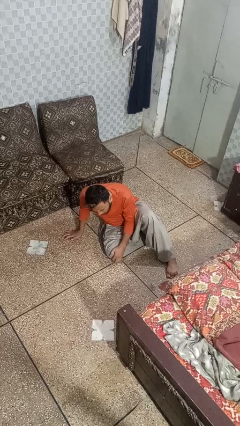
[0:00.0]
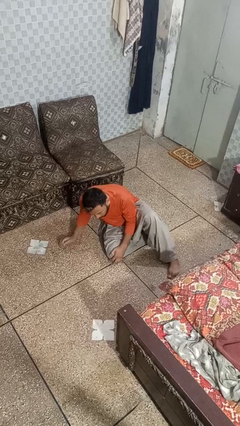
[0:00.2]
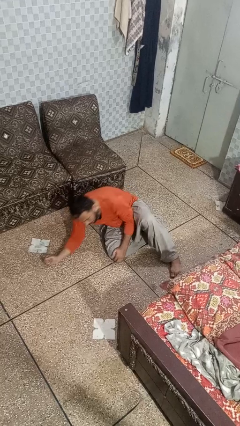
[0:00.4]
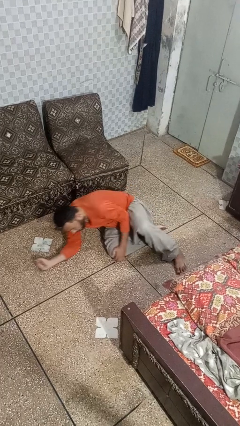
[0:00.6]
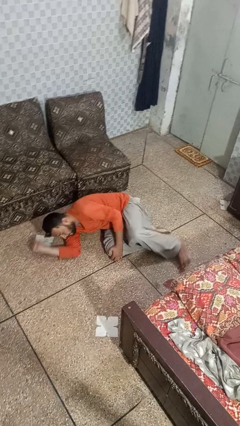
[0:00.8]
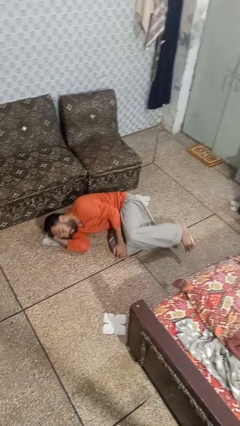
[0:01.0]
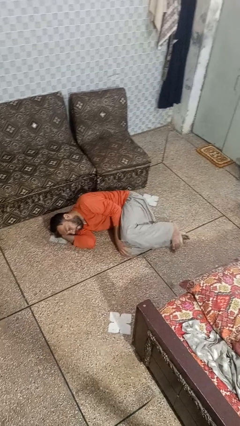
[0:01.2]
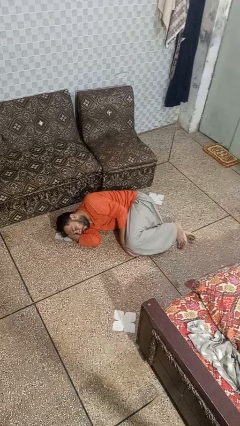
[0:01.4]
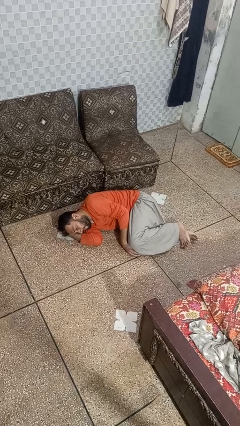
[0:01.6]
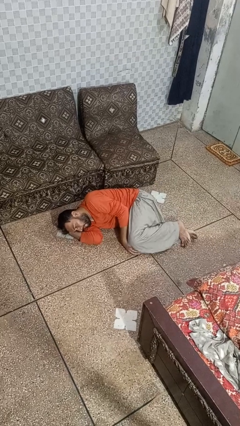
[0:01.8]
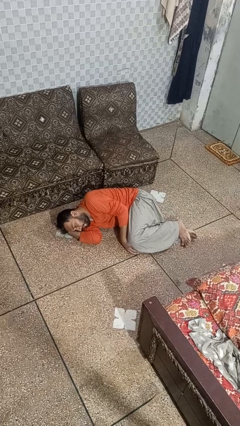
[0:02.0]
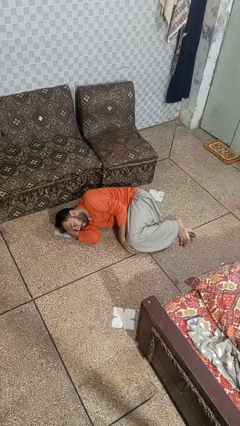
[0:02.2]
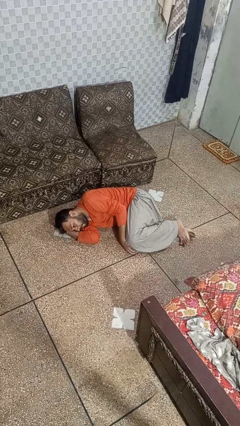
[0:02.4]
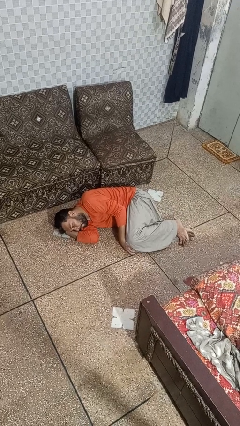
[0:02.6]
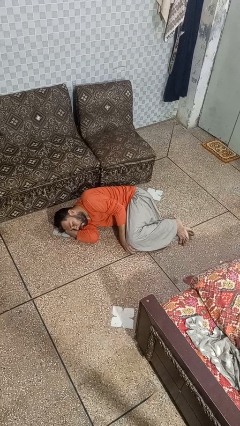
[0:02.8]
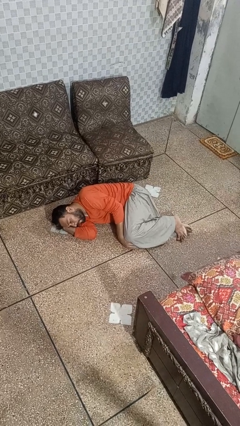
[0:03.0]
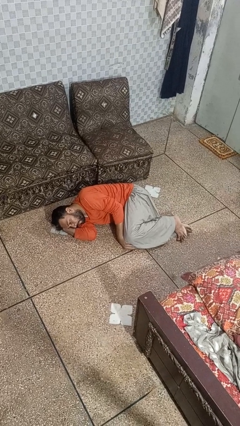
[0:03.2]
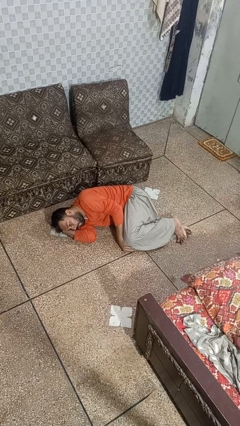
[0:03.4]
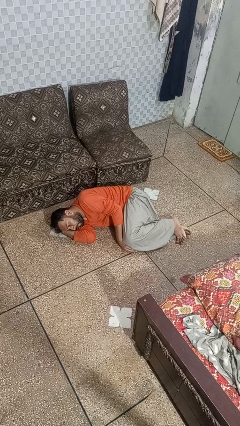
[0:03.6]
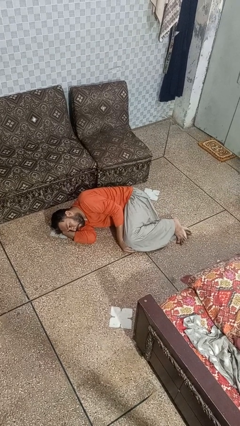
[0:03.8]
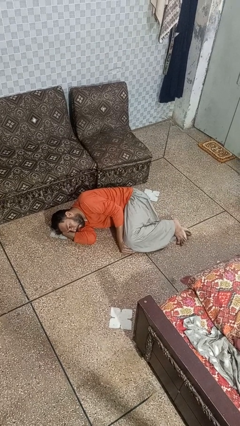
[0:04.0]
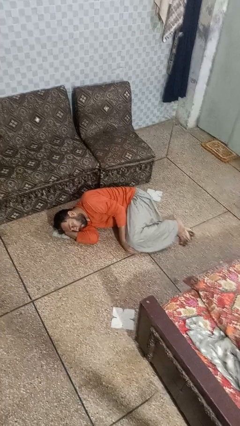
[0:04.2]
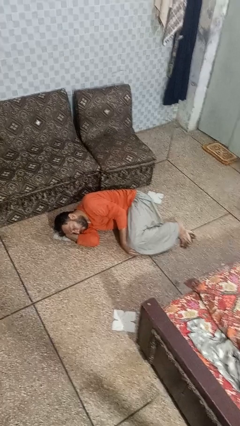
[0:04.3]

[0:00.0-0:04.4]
person lies down on floor

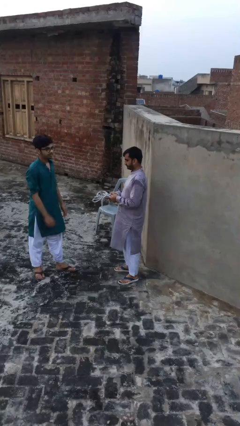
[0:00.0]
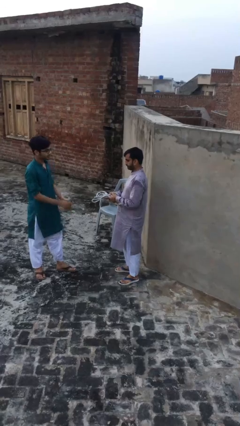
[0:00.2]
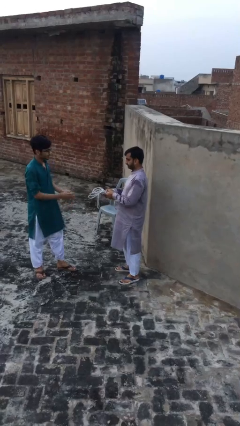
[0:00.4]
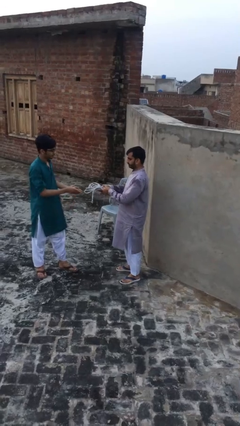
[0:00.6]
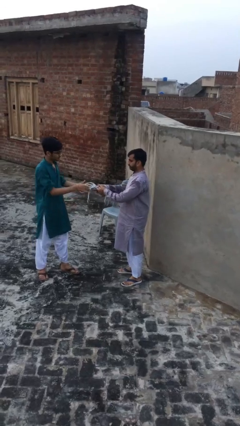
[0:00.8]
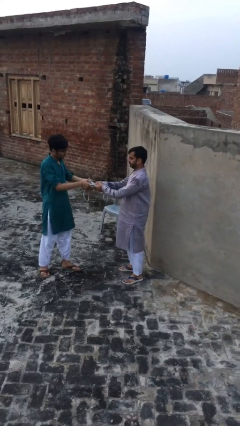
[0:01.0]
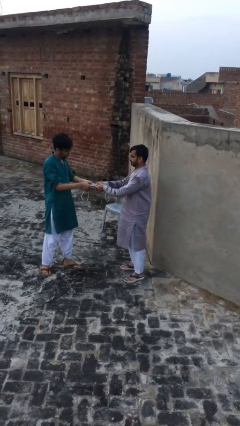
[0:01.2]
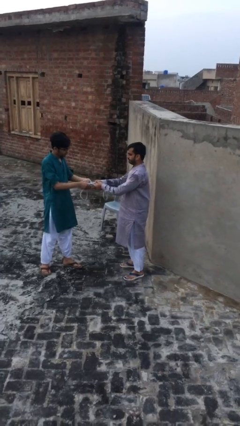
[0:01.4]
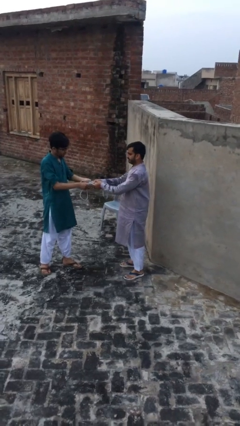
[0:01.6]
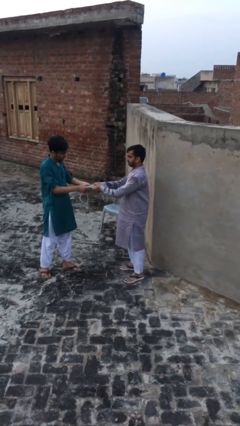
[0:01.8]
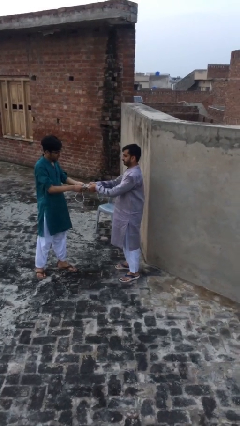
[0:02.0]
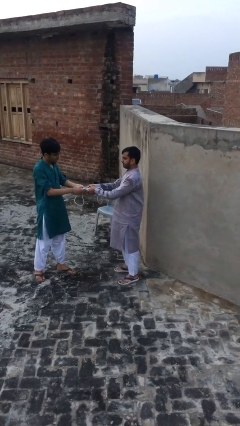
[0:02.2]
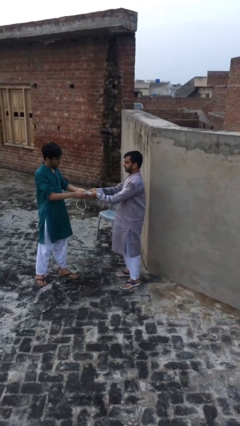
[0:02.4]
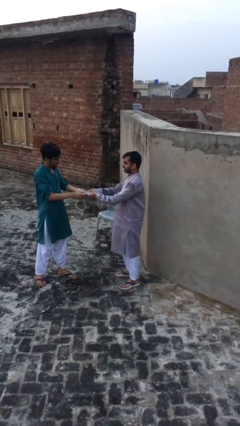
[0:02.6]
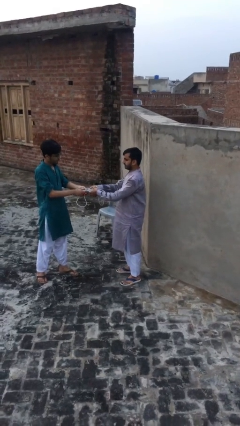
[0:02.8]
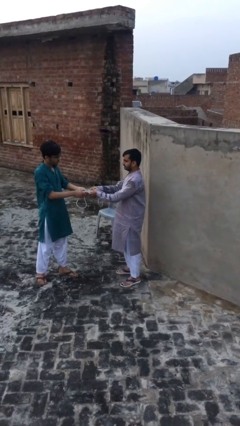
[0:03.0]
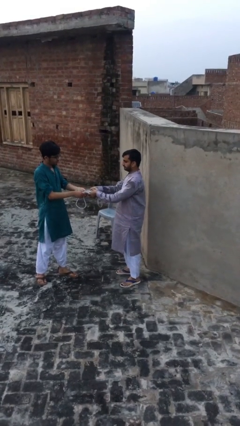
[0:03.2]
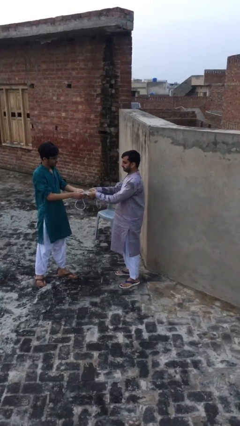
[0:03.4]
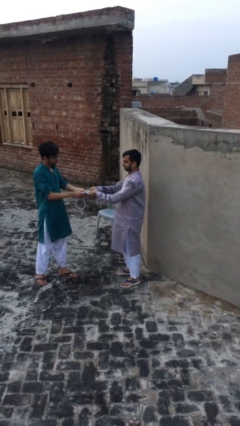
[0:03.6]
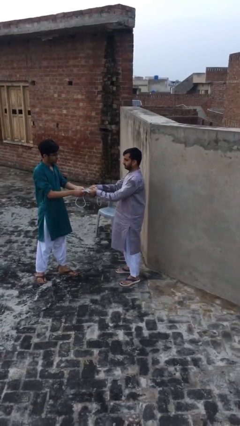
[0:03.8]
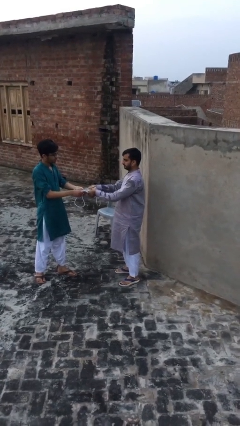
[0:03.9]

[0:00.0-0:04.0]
person transfers object to person

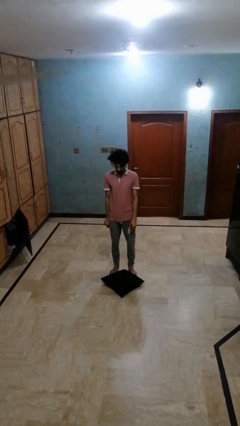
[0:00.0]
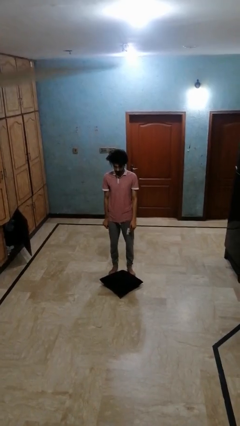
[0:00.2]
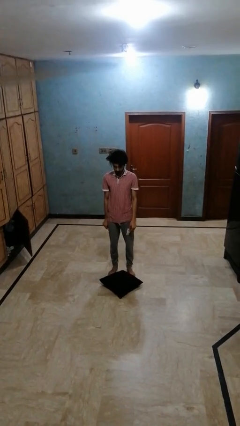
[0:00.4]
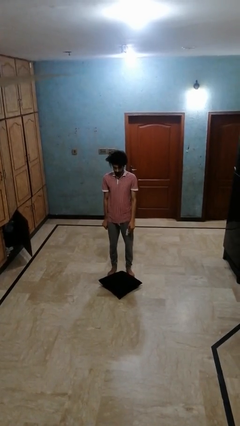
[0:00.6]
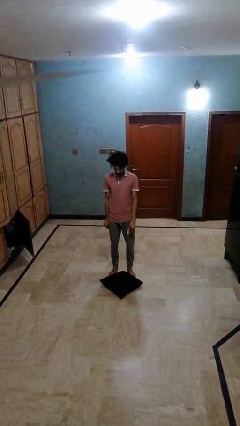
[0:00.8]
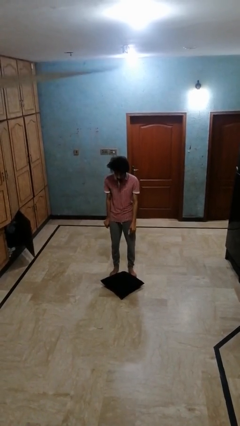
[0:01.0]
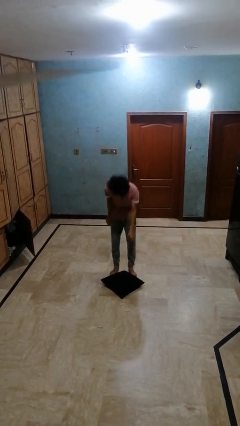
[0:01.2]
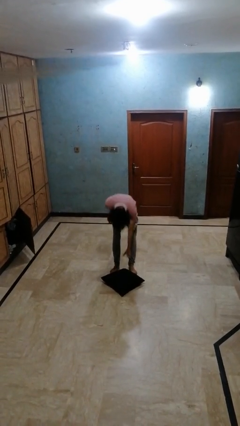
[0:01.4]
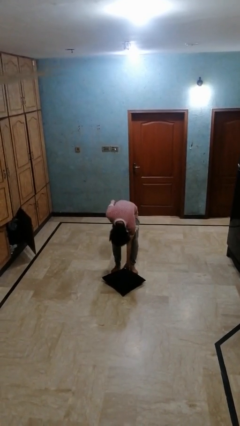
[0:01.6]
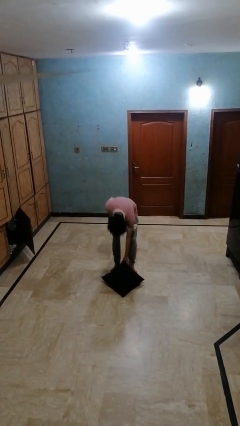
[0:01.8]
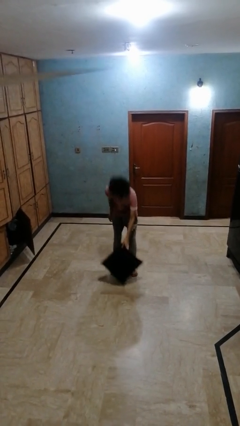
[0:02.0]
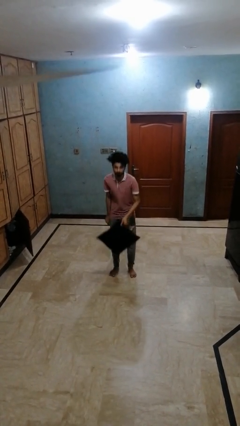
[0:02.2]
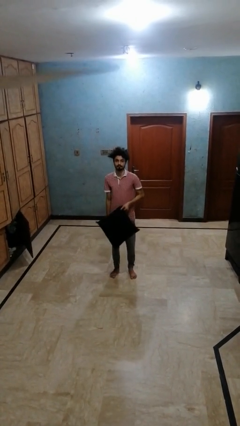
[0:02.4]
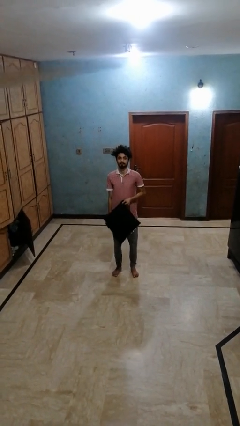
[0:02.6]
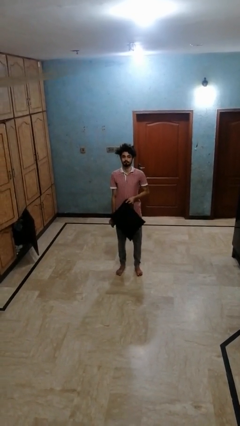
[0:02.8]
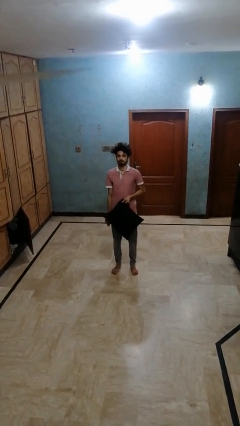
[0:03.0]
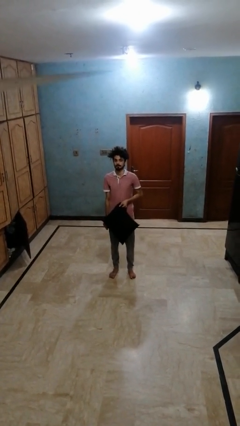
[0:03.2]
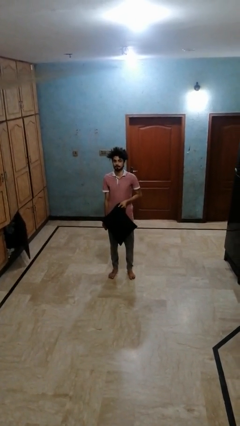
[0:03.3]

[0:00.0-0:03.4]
person picks up object from floor

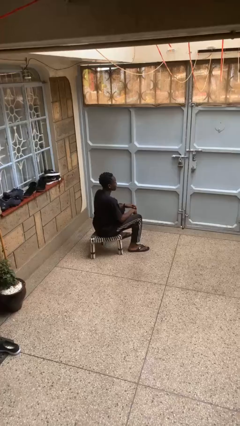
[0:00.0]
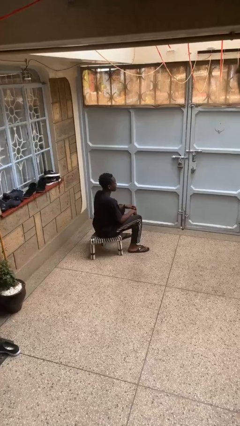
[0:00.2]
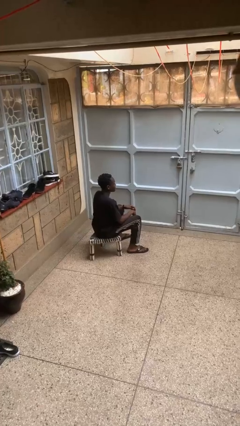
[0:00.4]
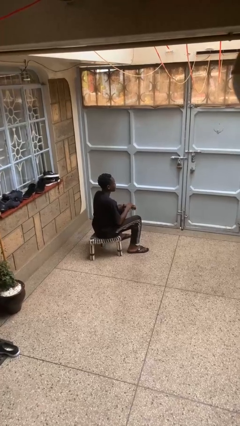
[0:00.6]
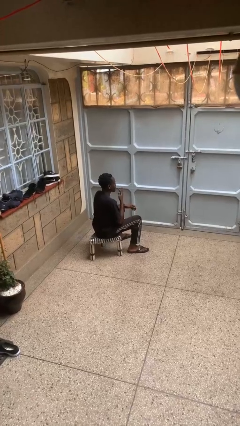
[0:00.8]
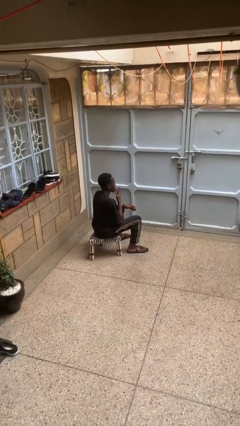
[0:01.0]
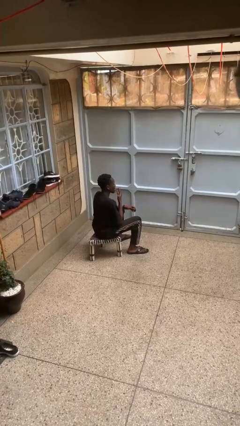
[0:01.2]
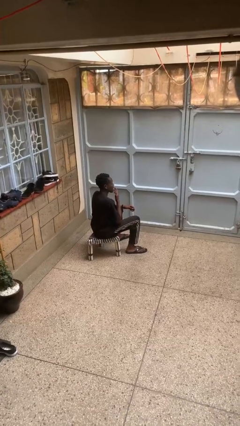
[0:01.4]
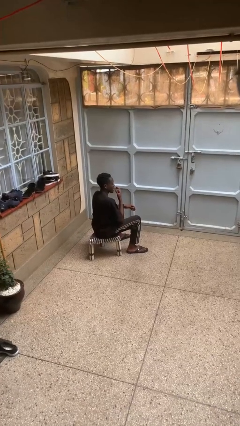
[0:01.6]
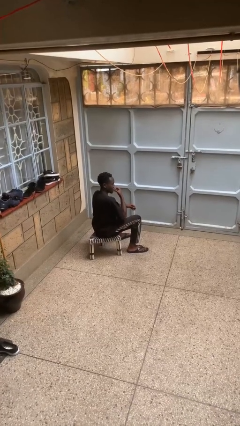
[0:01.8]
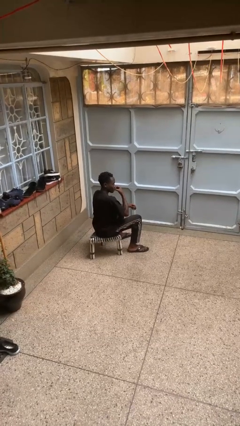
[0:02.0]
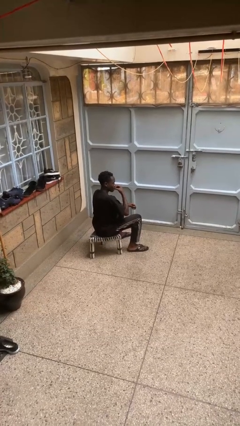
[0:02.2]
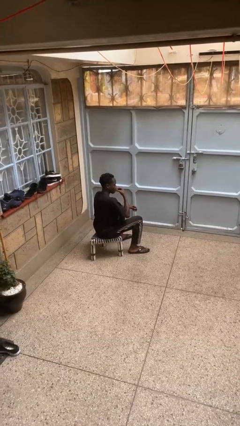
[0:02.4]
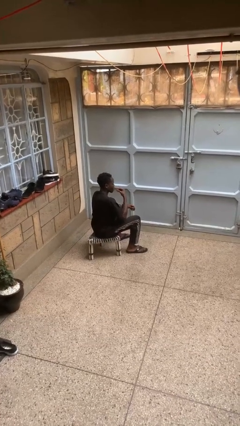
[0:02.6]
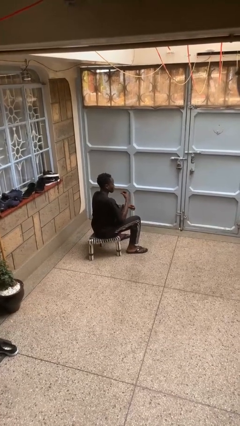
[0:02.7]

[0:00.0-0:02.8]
person licks fingers

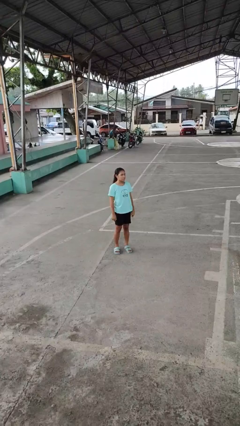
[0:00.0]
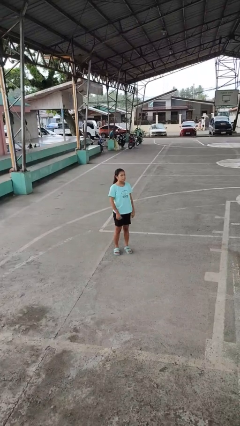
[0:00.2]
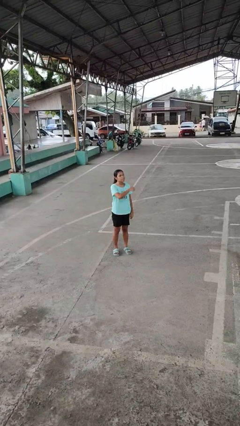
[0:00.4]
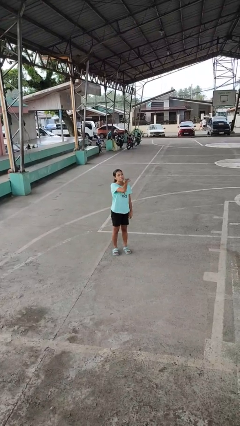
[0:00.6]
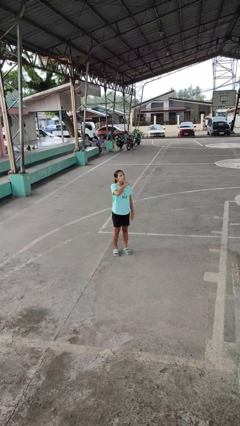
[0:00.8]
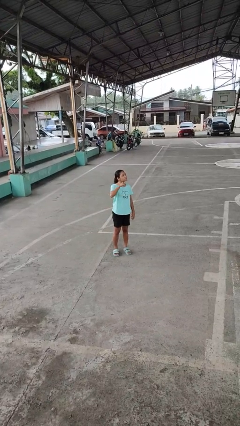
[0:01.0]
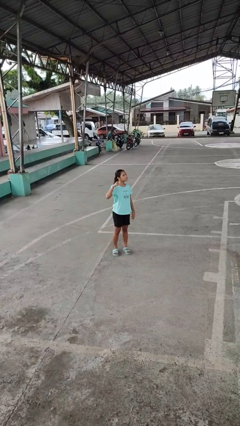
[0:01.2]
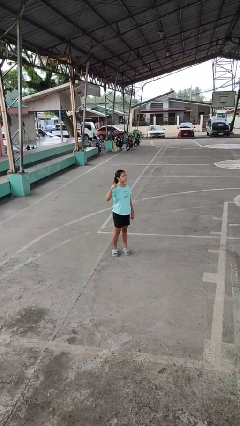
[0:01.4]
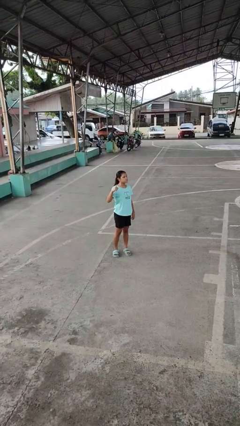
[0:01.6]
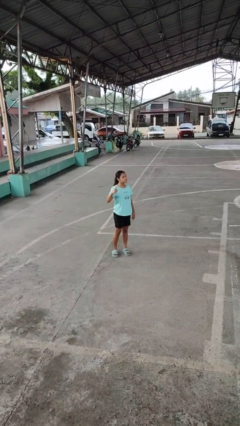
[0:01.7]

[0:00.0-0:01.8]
person gestures cut

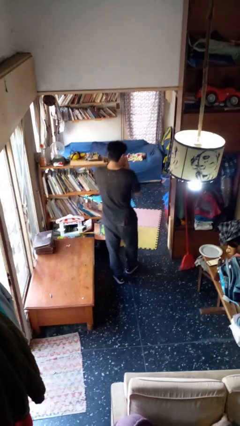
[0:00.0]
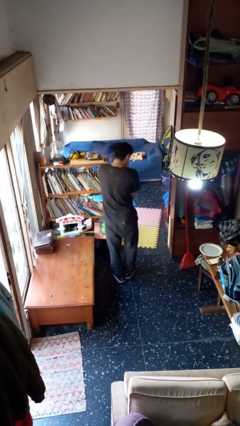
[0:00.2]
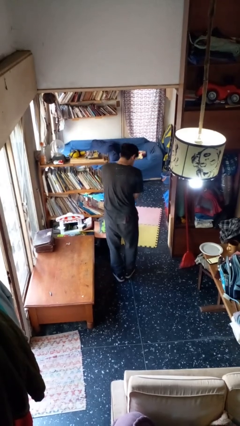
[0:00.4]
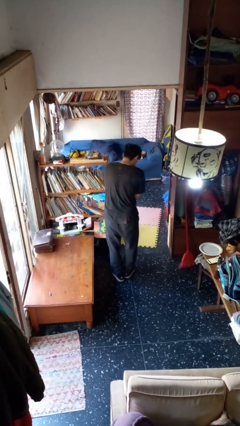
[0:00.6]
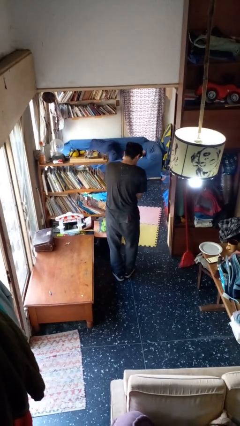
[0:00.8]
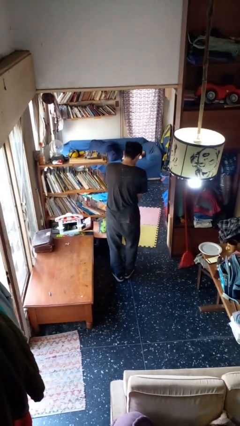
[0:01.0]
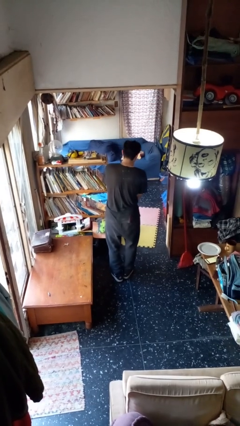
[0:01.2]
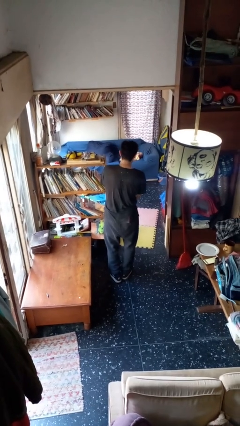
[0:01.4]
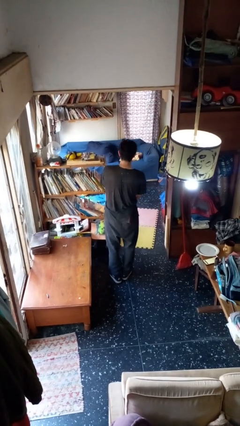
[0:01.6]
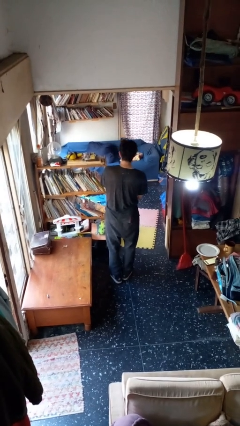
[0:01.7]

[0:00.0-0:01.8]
person sneezes into hand
